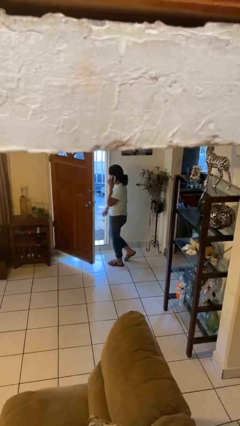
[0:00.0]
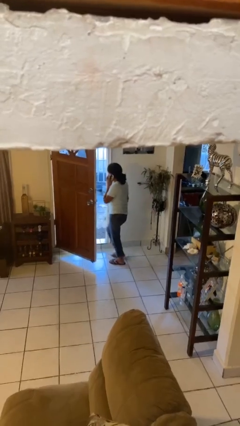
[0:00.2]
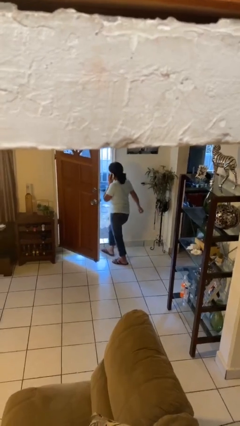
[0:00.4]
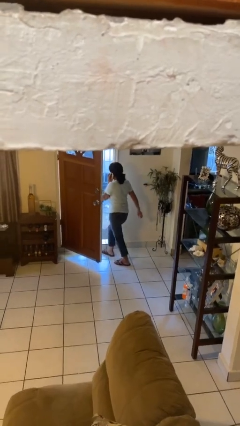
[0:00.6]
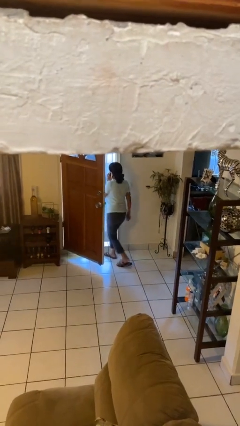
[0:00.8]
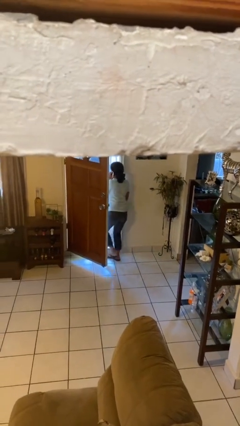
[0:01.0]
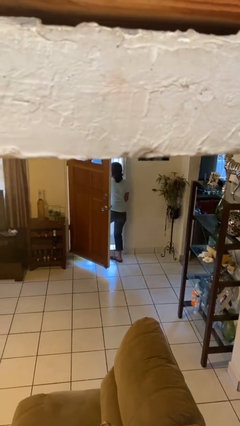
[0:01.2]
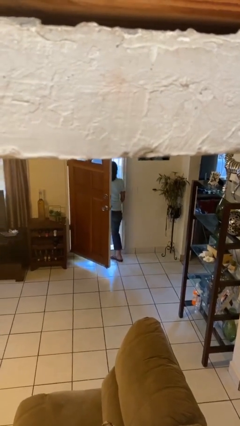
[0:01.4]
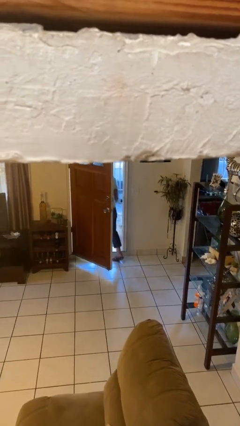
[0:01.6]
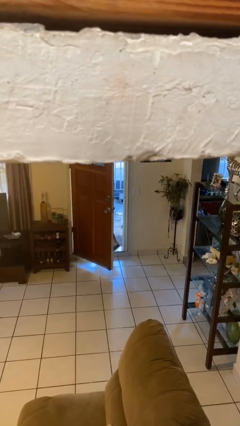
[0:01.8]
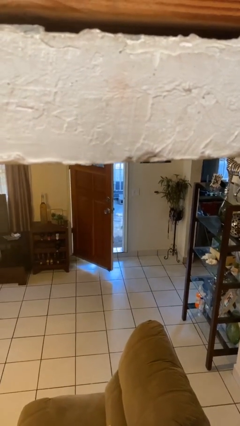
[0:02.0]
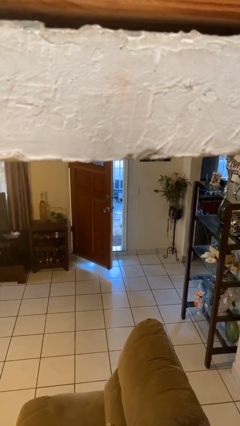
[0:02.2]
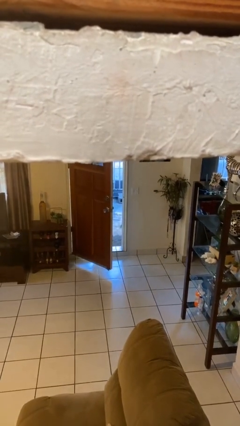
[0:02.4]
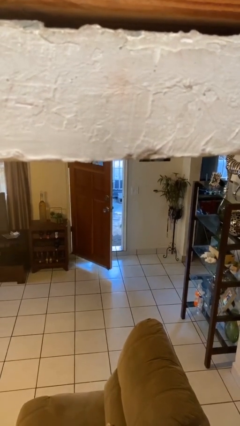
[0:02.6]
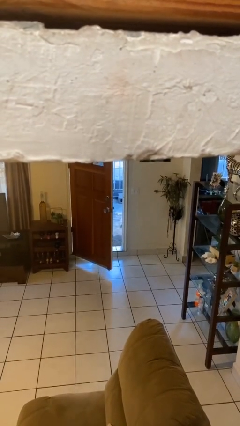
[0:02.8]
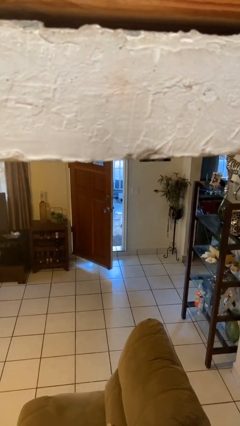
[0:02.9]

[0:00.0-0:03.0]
person exits scene through structure

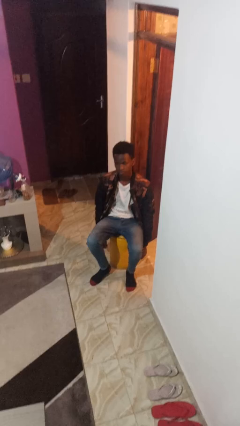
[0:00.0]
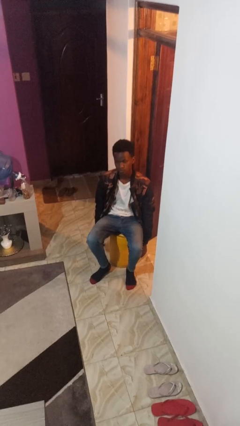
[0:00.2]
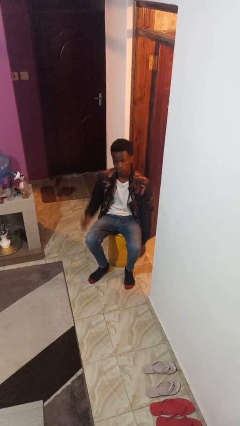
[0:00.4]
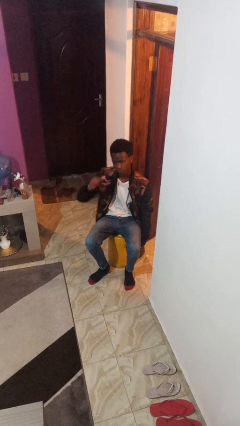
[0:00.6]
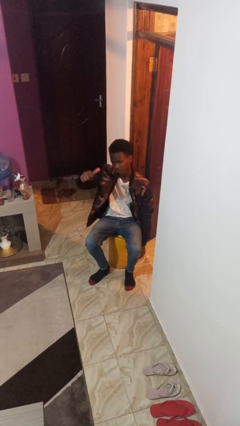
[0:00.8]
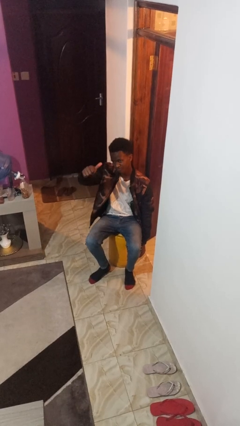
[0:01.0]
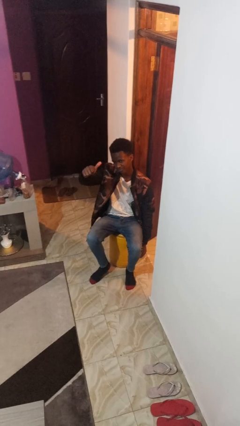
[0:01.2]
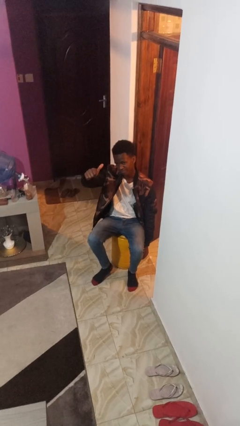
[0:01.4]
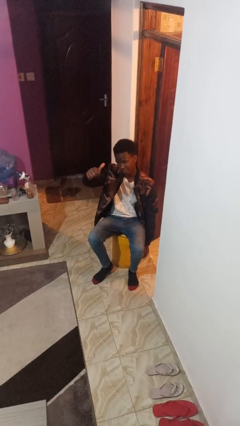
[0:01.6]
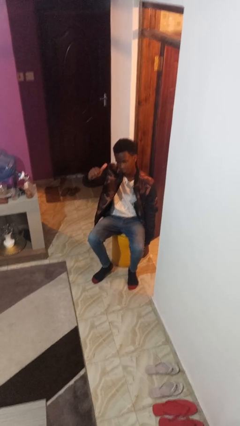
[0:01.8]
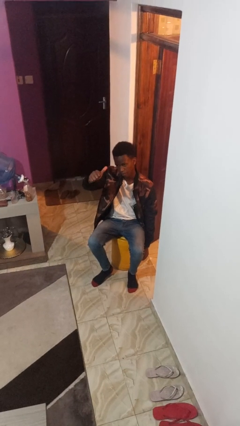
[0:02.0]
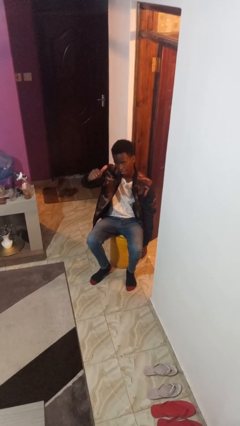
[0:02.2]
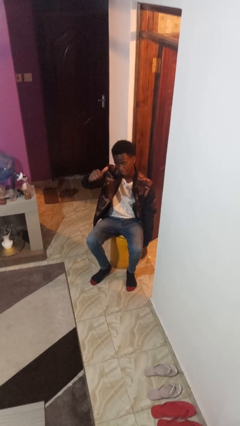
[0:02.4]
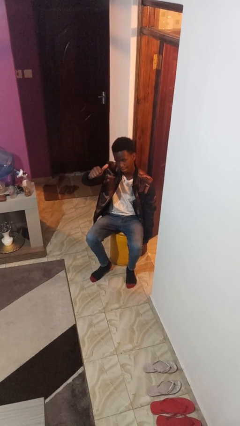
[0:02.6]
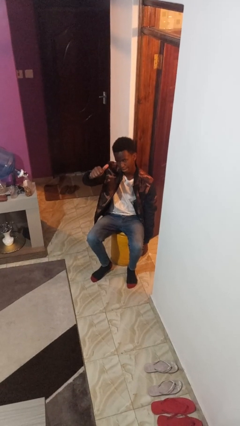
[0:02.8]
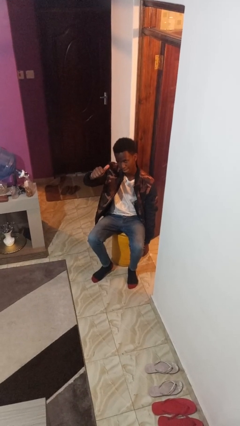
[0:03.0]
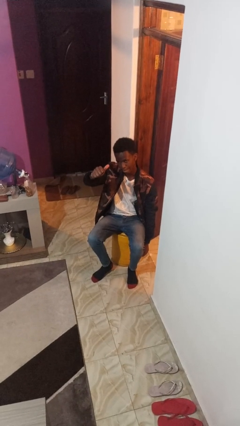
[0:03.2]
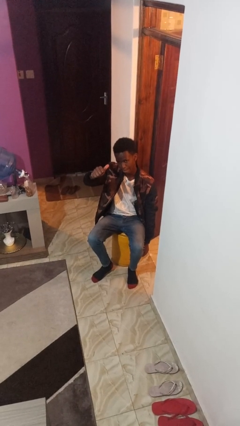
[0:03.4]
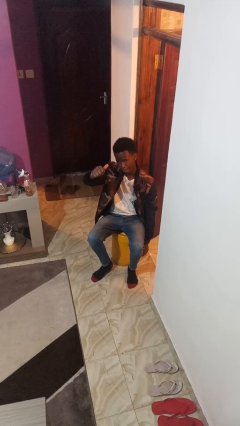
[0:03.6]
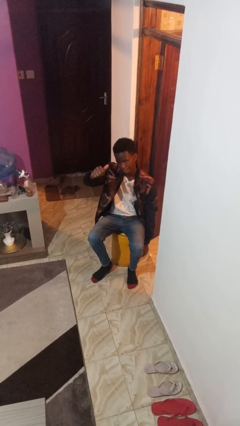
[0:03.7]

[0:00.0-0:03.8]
person gestures thumbs up

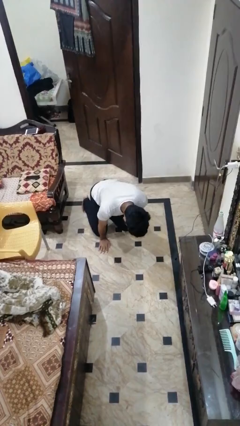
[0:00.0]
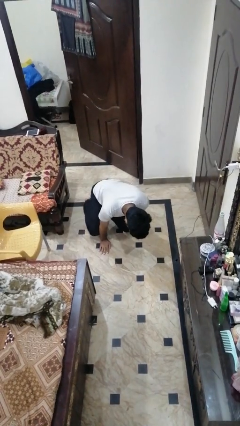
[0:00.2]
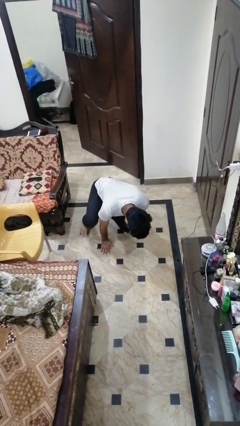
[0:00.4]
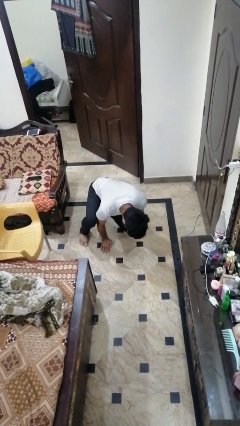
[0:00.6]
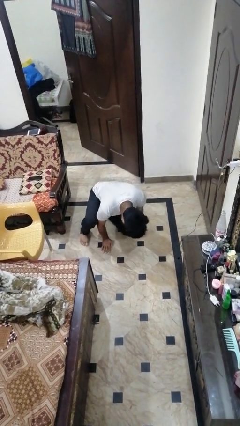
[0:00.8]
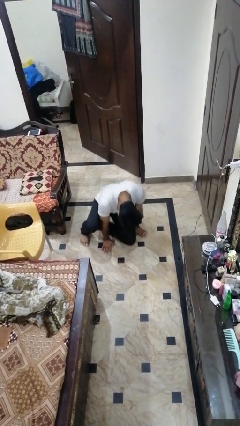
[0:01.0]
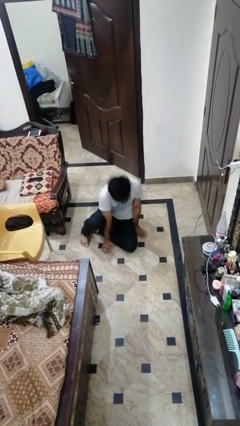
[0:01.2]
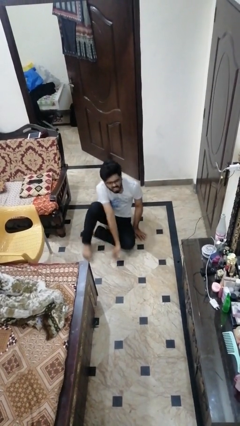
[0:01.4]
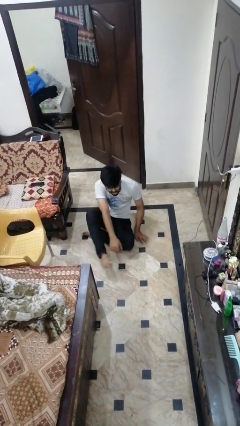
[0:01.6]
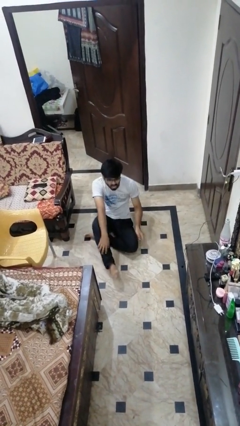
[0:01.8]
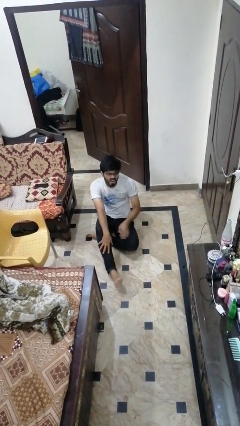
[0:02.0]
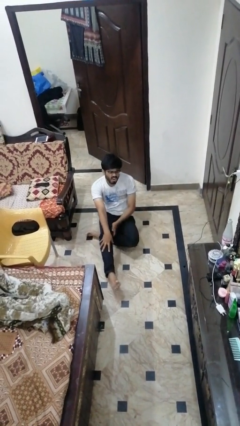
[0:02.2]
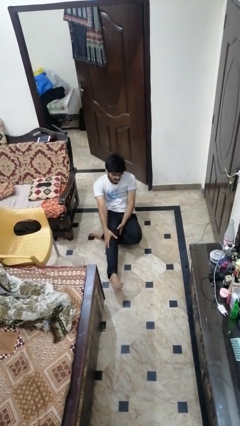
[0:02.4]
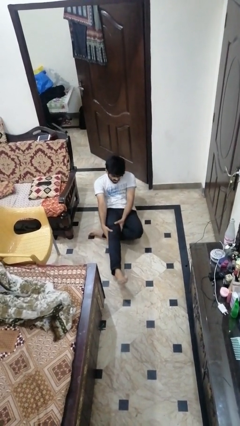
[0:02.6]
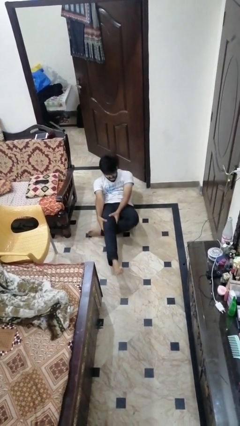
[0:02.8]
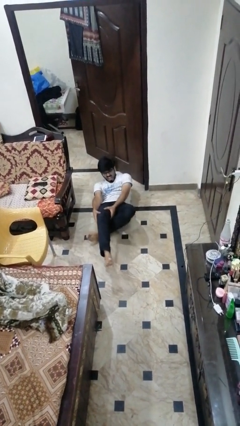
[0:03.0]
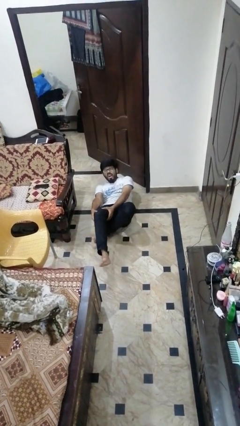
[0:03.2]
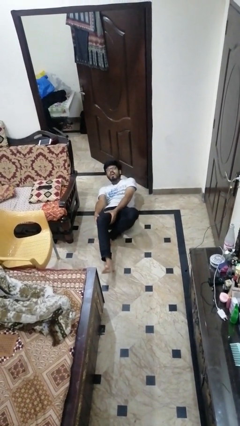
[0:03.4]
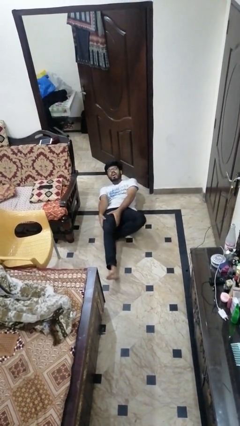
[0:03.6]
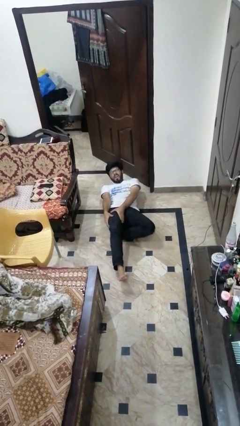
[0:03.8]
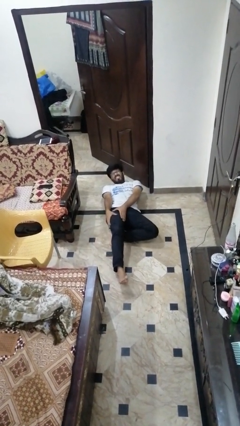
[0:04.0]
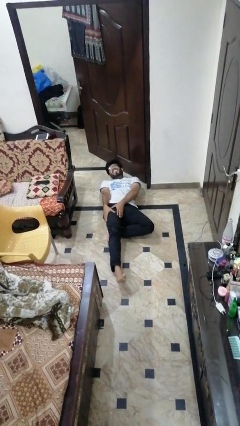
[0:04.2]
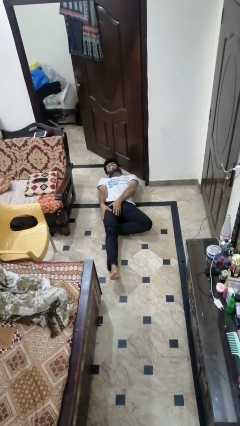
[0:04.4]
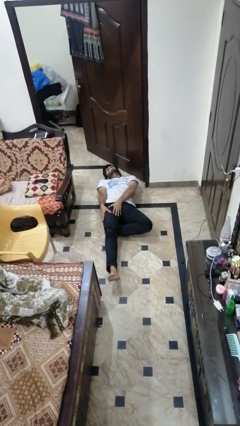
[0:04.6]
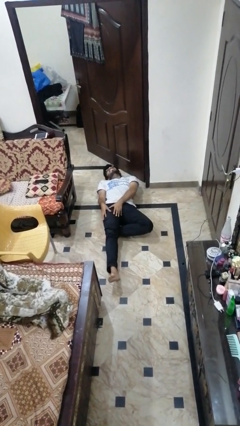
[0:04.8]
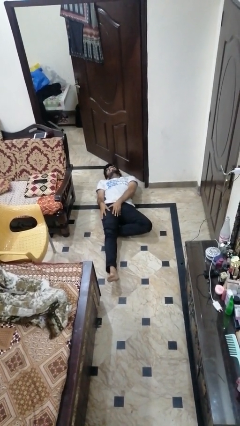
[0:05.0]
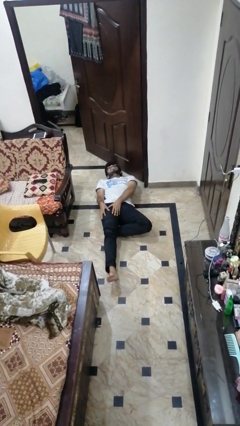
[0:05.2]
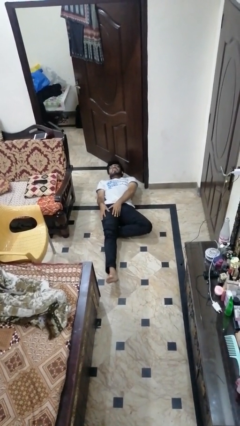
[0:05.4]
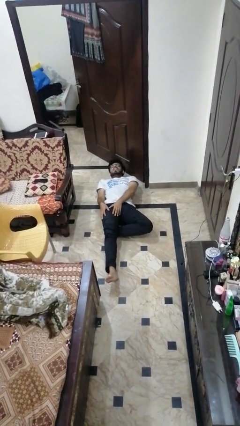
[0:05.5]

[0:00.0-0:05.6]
person lies down on floor

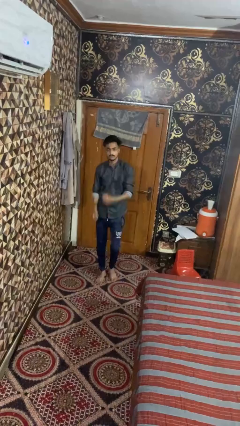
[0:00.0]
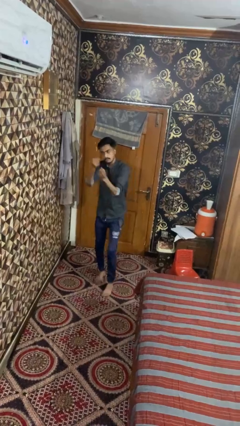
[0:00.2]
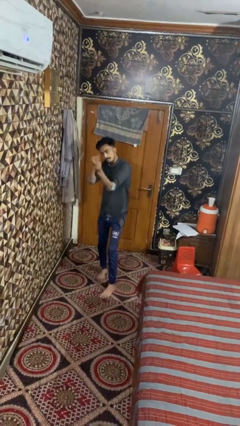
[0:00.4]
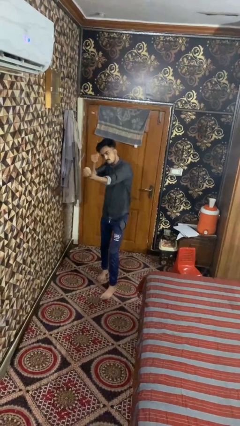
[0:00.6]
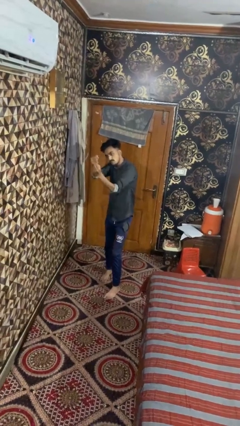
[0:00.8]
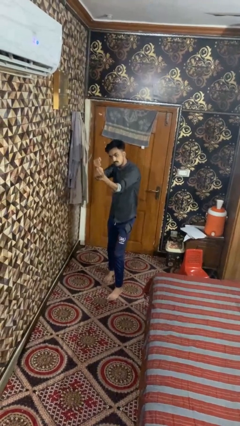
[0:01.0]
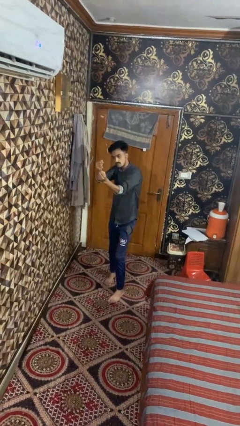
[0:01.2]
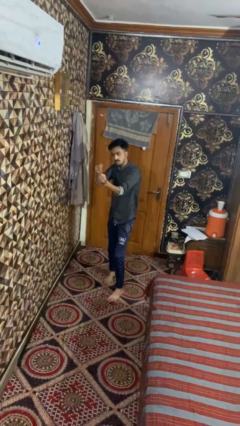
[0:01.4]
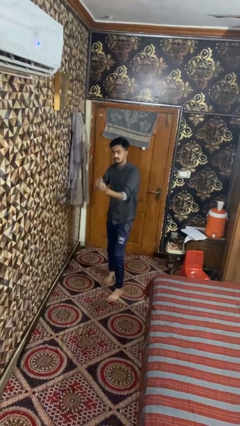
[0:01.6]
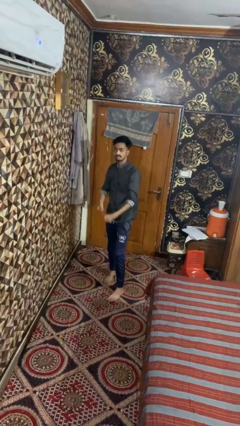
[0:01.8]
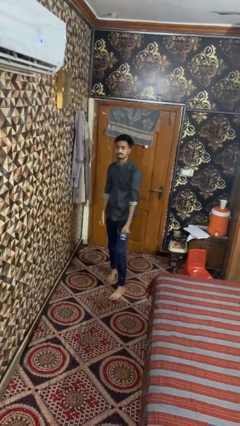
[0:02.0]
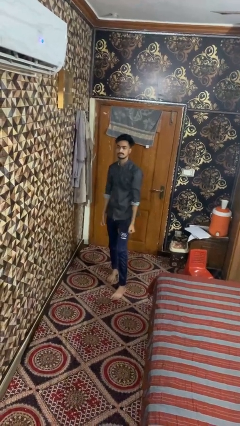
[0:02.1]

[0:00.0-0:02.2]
person punches

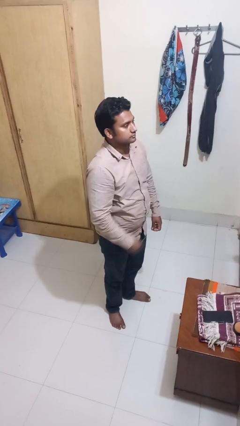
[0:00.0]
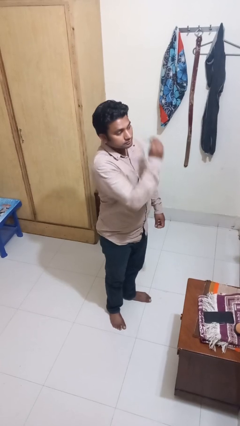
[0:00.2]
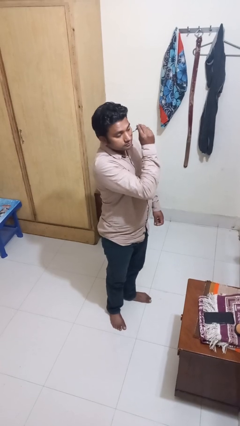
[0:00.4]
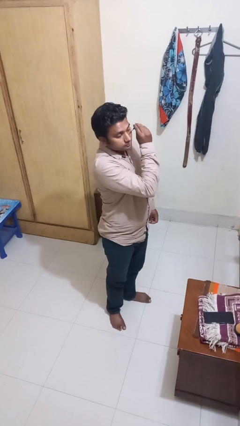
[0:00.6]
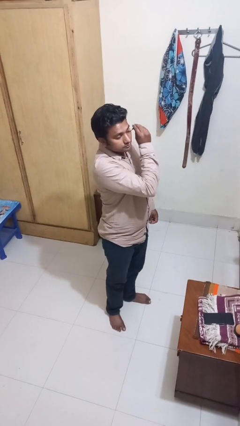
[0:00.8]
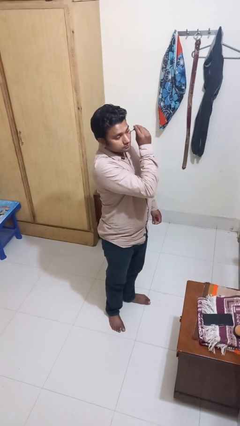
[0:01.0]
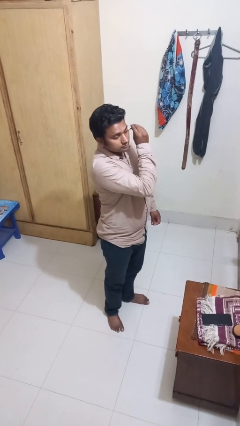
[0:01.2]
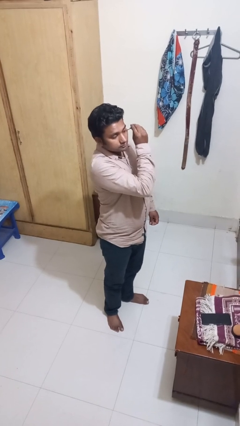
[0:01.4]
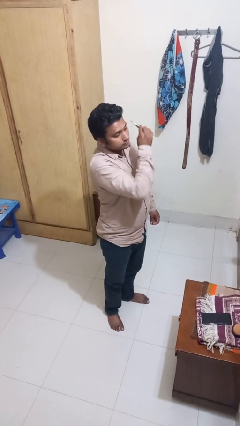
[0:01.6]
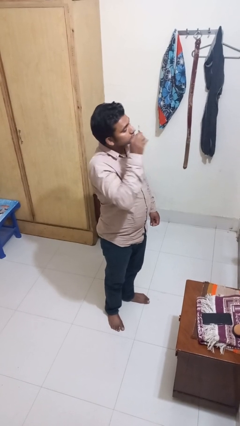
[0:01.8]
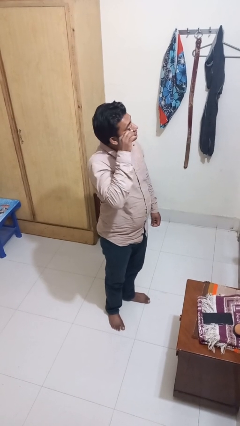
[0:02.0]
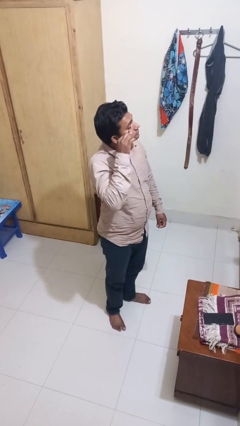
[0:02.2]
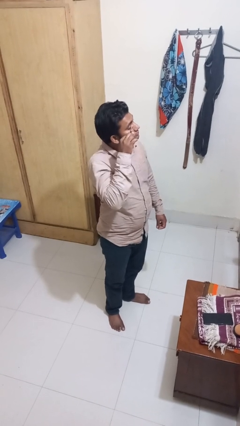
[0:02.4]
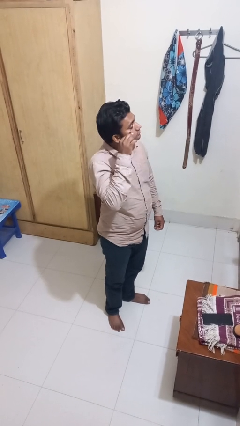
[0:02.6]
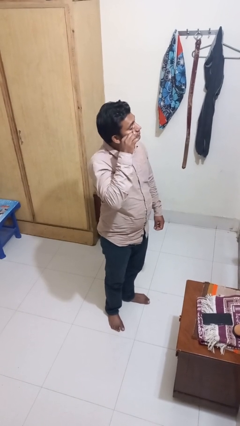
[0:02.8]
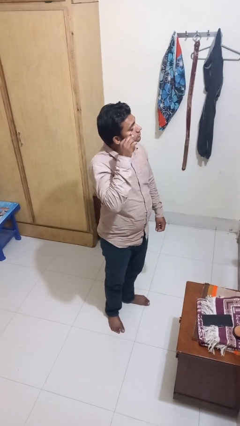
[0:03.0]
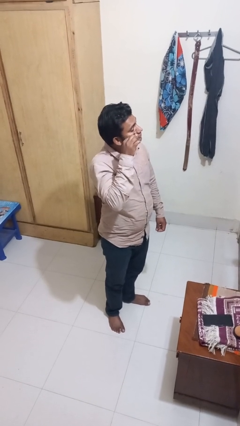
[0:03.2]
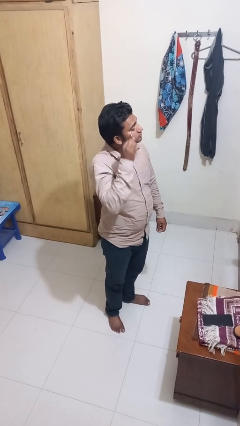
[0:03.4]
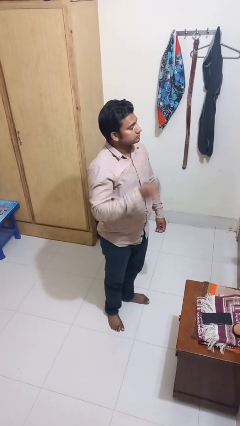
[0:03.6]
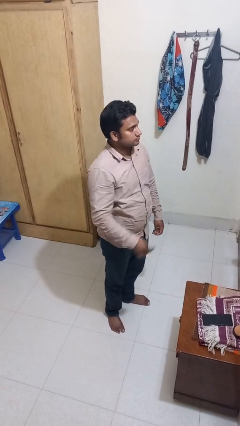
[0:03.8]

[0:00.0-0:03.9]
person applies eye makeup
